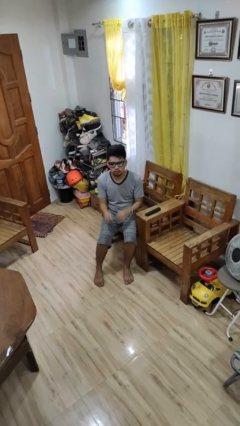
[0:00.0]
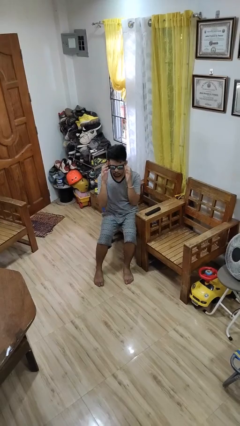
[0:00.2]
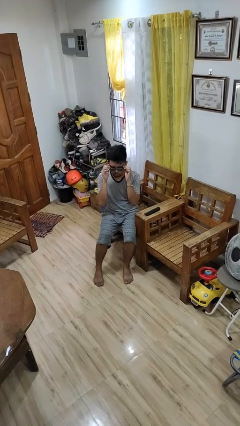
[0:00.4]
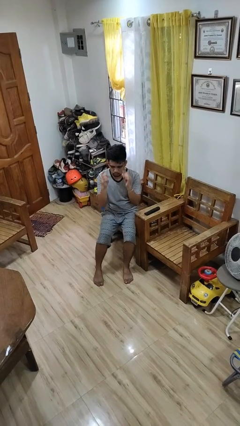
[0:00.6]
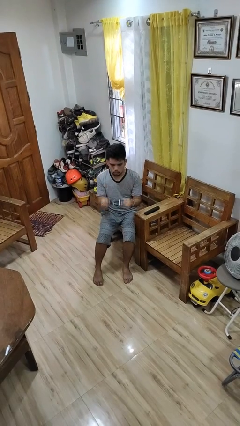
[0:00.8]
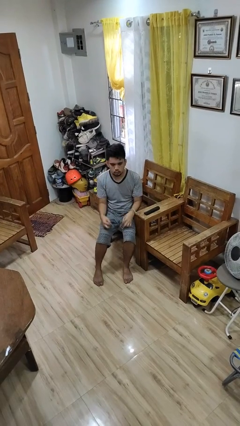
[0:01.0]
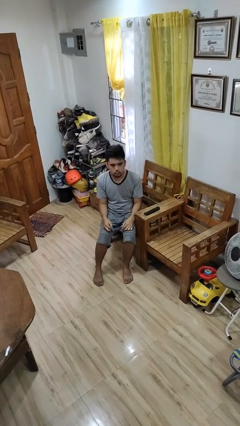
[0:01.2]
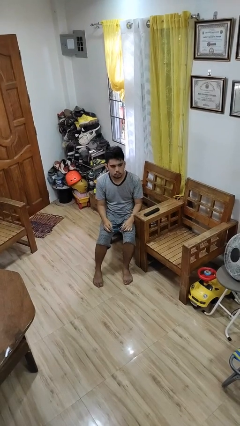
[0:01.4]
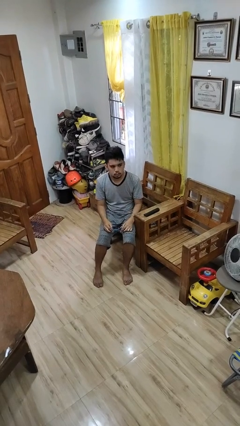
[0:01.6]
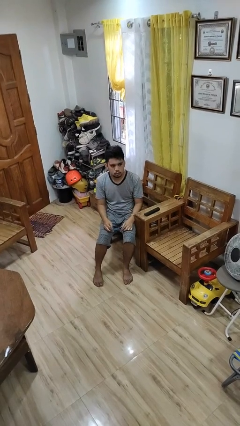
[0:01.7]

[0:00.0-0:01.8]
person takes off sunglasses

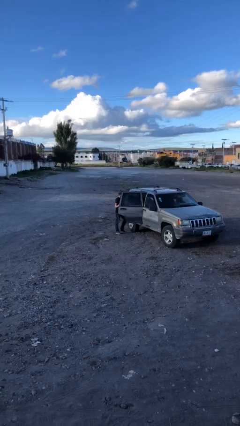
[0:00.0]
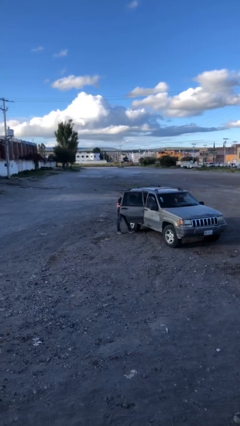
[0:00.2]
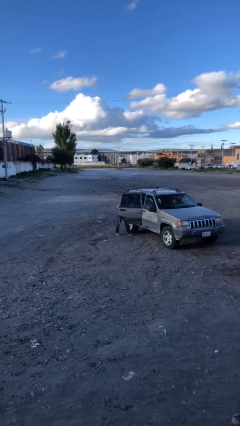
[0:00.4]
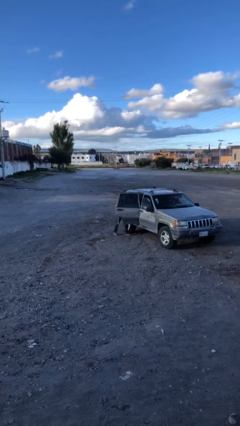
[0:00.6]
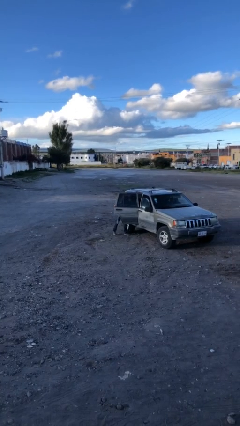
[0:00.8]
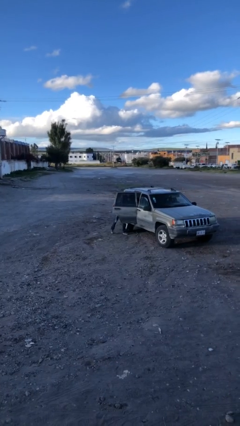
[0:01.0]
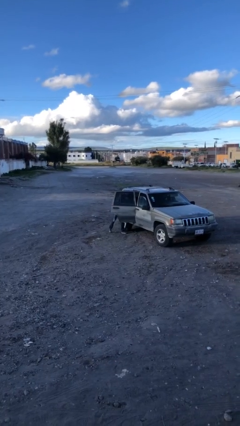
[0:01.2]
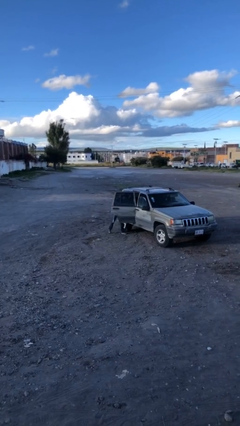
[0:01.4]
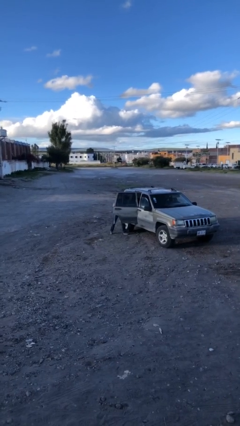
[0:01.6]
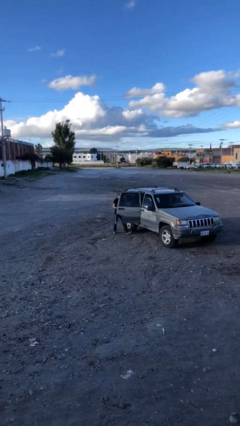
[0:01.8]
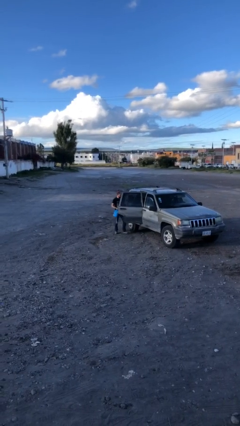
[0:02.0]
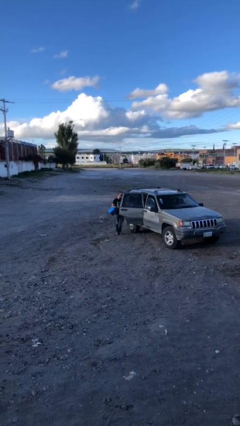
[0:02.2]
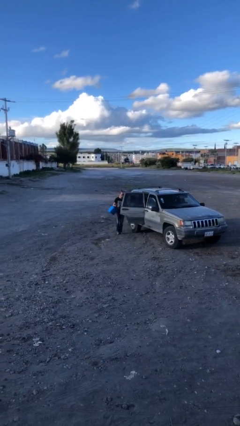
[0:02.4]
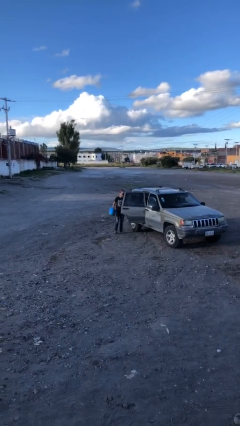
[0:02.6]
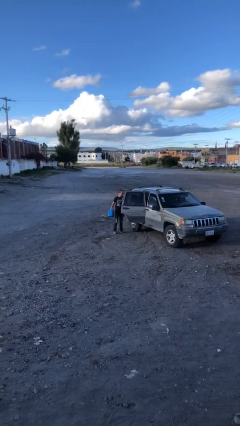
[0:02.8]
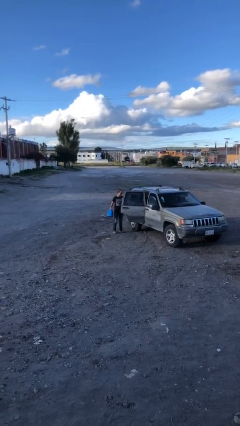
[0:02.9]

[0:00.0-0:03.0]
person unloads car

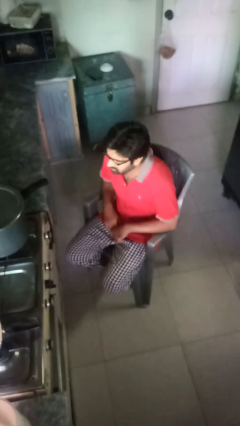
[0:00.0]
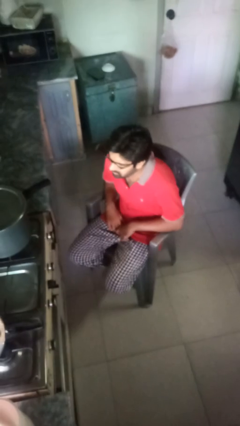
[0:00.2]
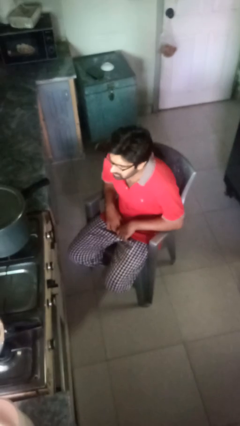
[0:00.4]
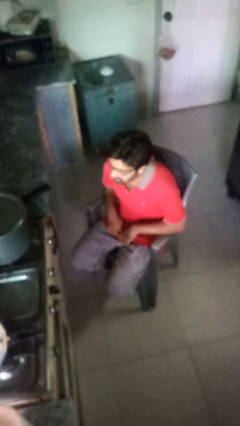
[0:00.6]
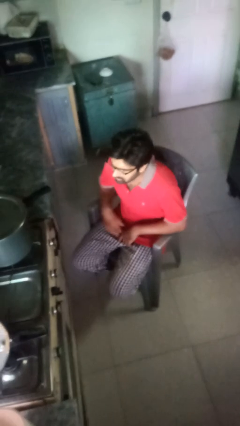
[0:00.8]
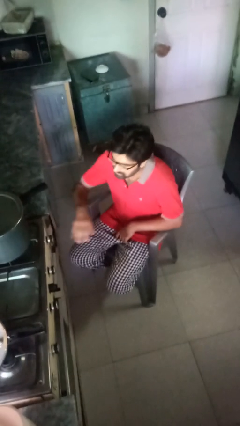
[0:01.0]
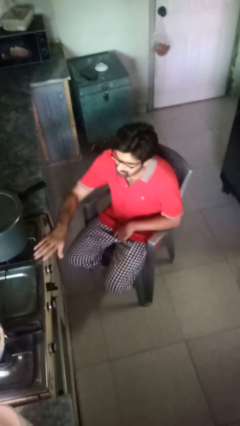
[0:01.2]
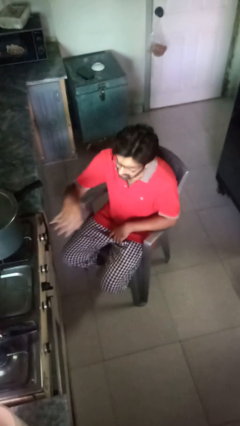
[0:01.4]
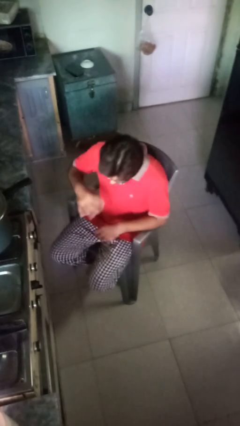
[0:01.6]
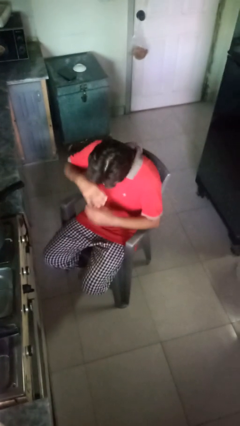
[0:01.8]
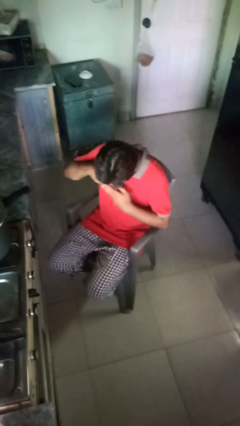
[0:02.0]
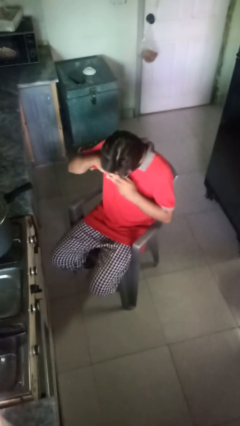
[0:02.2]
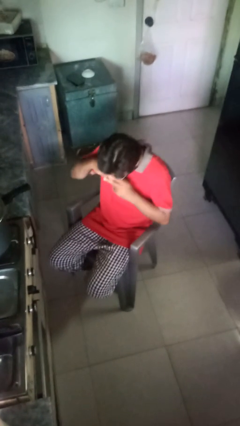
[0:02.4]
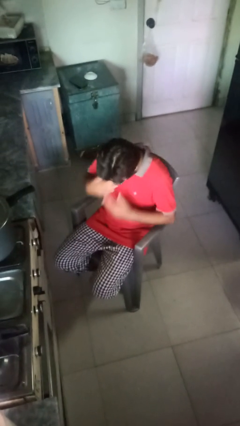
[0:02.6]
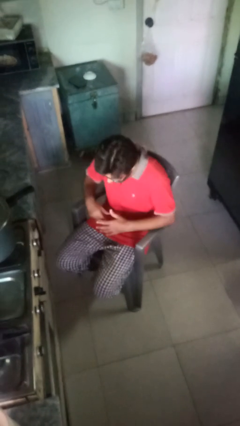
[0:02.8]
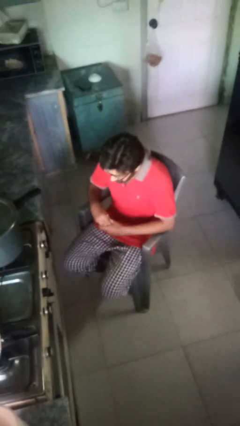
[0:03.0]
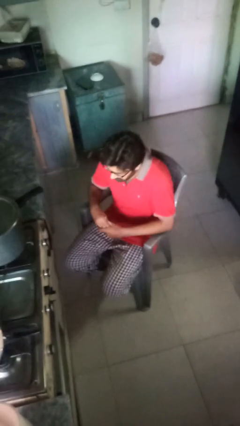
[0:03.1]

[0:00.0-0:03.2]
person burns hand

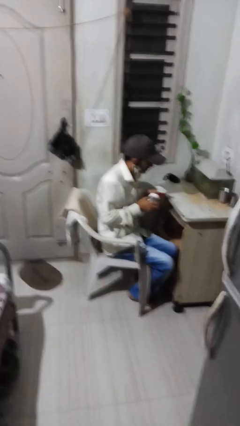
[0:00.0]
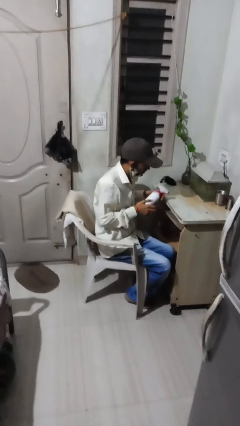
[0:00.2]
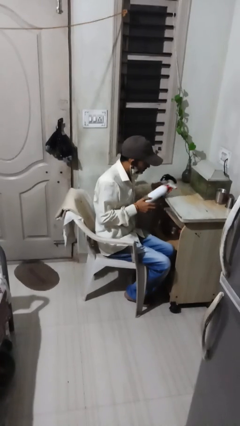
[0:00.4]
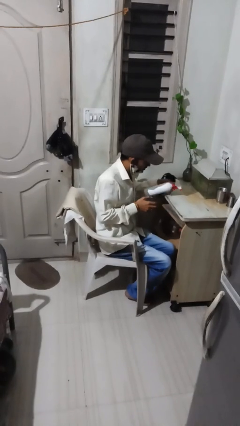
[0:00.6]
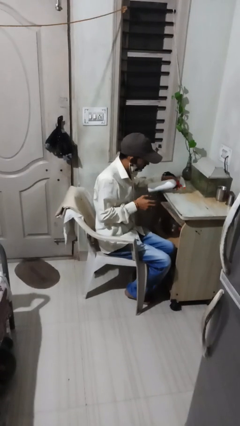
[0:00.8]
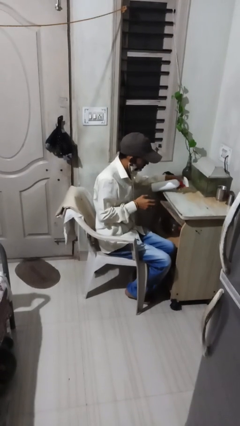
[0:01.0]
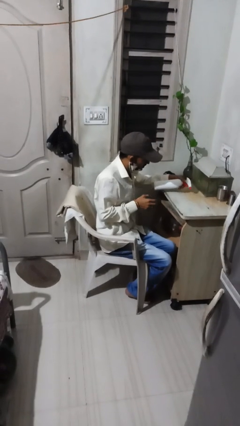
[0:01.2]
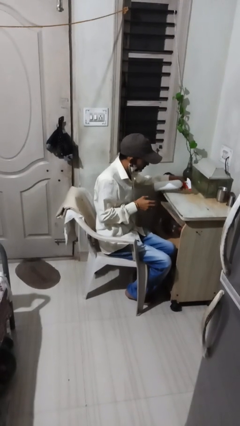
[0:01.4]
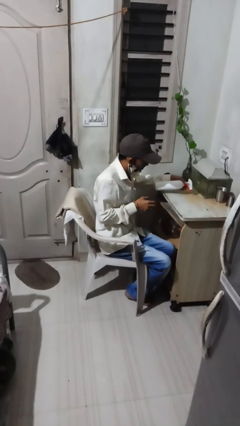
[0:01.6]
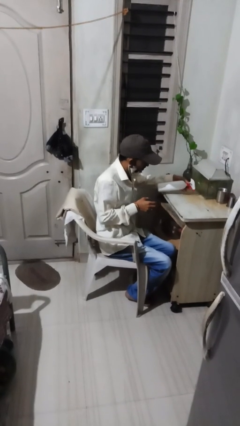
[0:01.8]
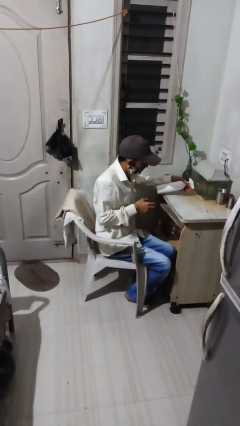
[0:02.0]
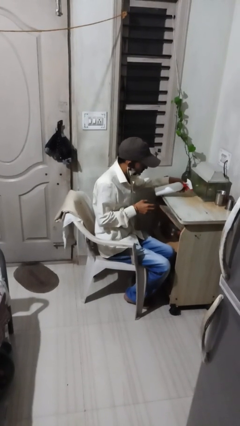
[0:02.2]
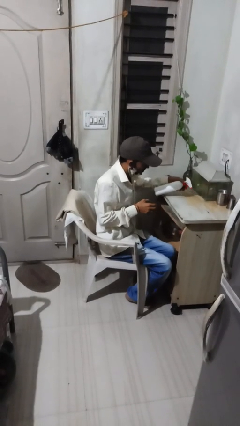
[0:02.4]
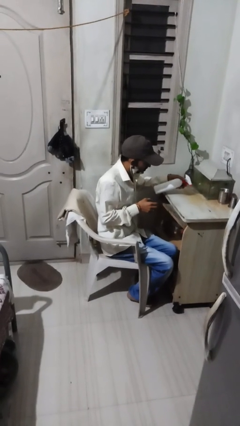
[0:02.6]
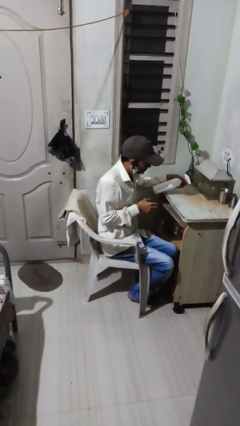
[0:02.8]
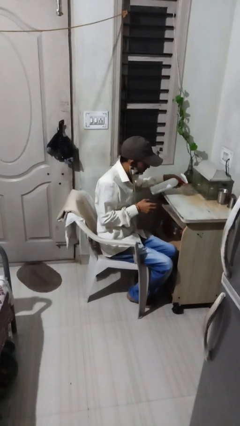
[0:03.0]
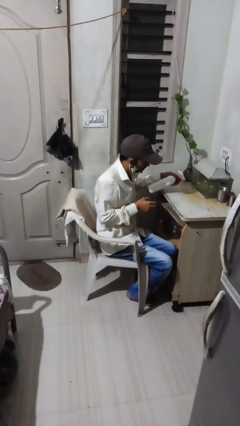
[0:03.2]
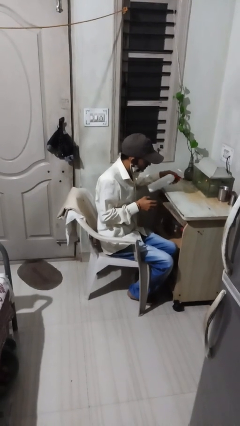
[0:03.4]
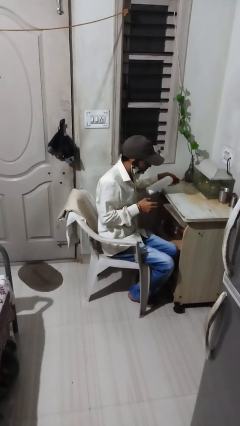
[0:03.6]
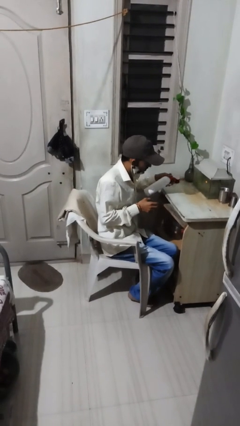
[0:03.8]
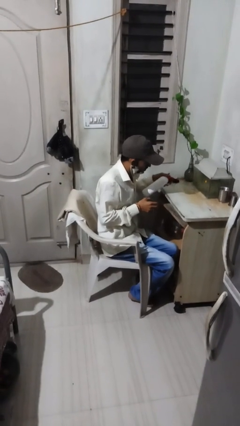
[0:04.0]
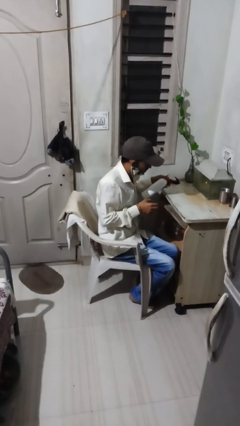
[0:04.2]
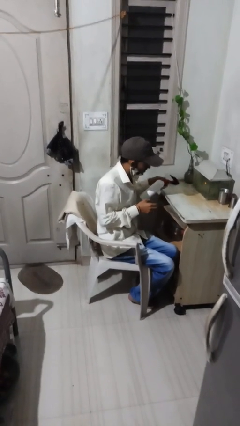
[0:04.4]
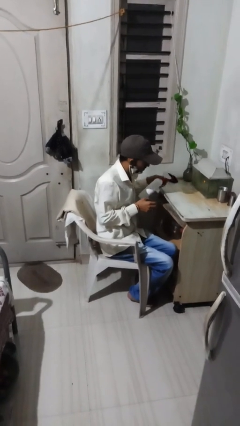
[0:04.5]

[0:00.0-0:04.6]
person sprays from bottle

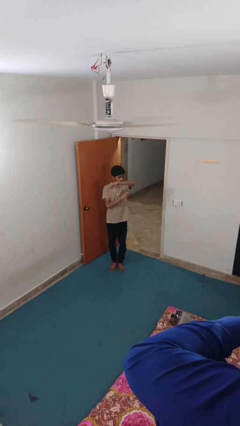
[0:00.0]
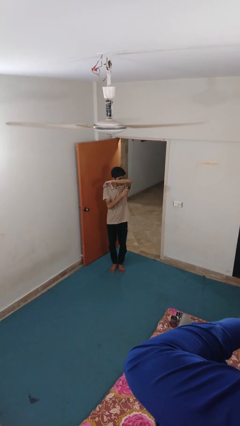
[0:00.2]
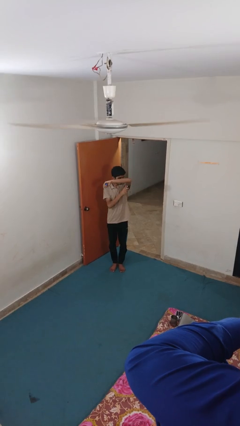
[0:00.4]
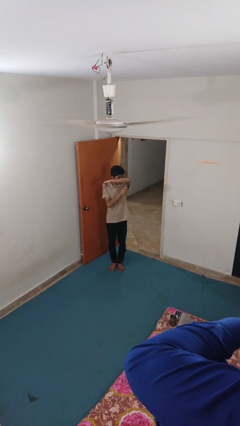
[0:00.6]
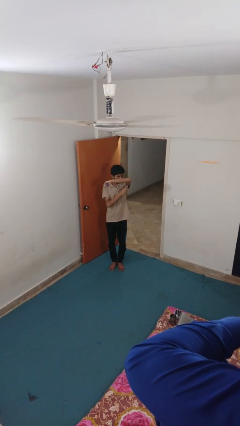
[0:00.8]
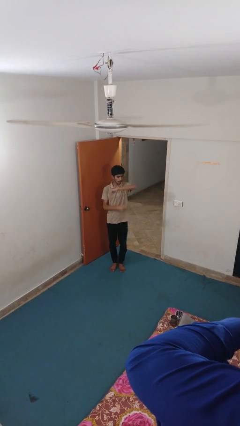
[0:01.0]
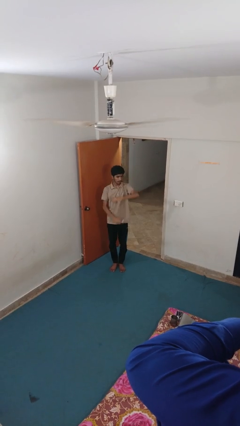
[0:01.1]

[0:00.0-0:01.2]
person applies deodorant

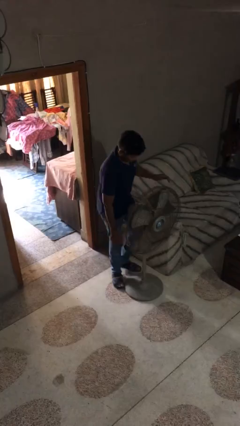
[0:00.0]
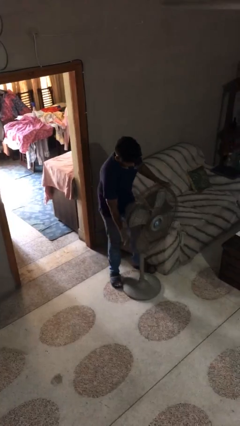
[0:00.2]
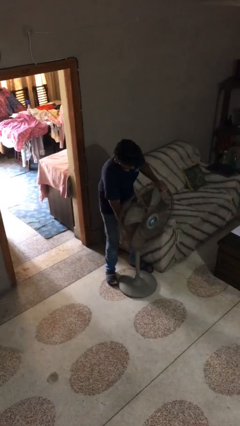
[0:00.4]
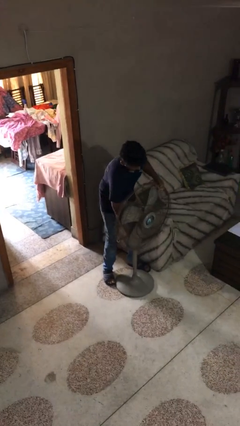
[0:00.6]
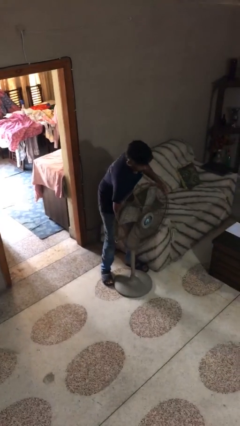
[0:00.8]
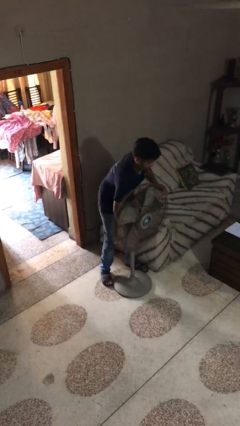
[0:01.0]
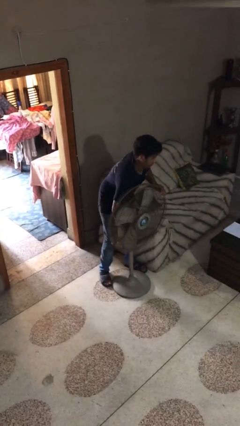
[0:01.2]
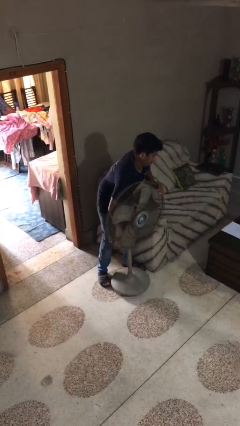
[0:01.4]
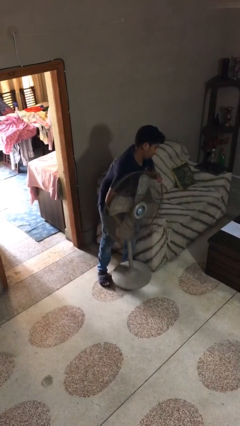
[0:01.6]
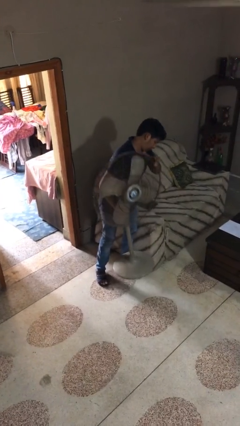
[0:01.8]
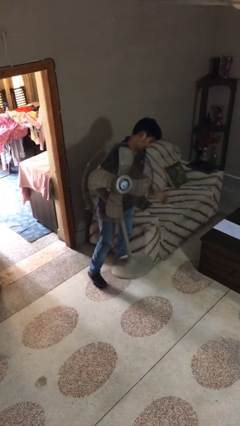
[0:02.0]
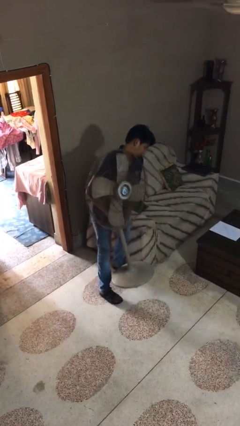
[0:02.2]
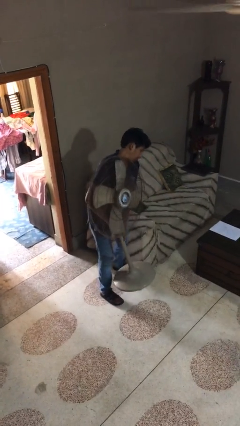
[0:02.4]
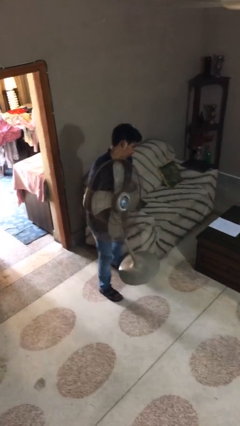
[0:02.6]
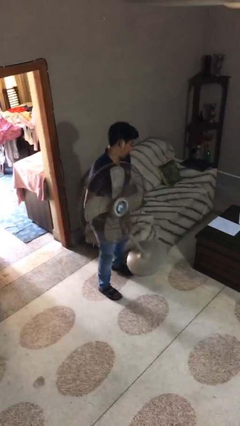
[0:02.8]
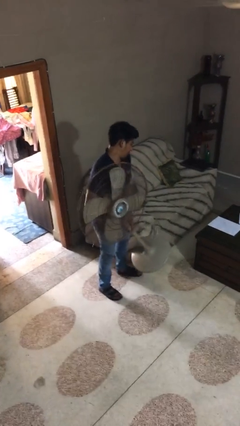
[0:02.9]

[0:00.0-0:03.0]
person picks up object from floor
